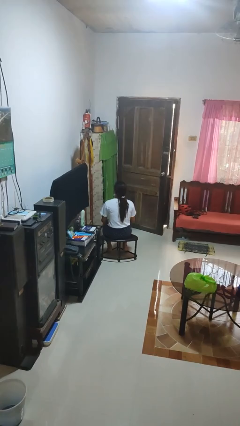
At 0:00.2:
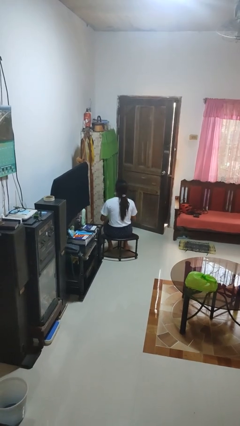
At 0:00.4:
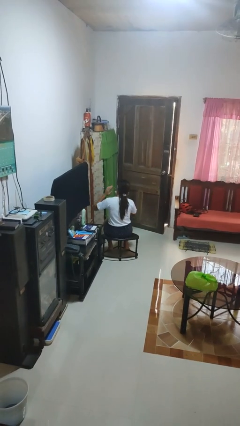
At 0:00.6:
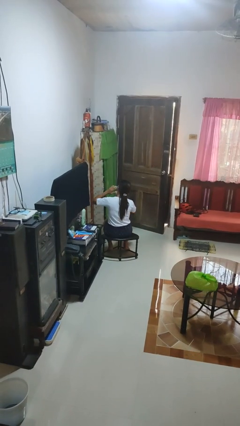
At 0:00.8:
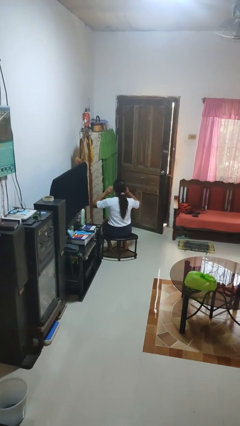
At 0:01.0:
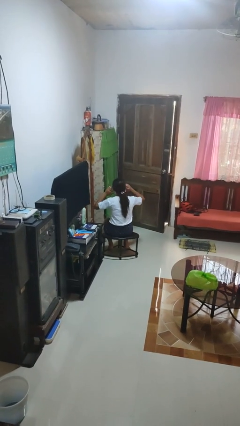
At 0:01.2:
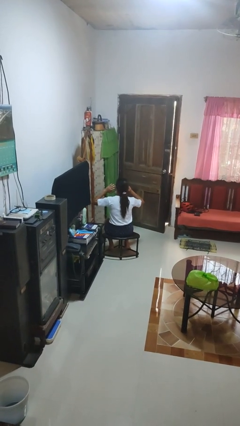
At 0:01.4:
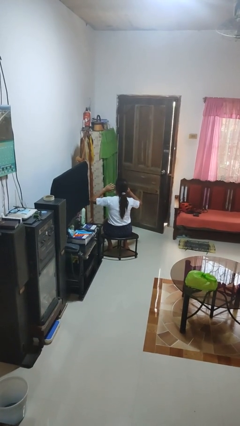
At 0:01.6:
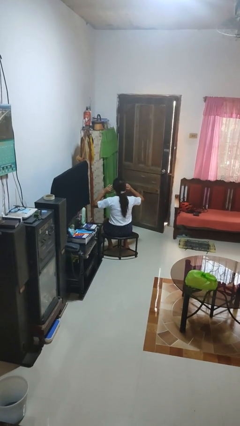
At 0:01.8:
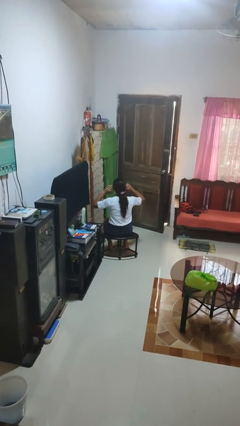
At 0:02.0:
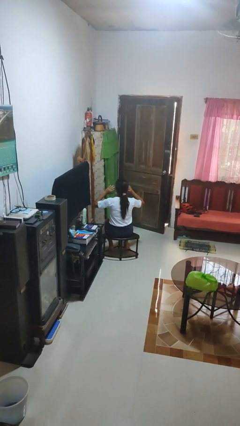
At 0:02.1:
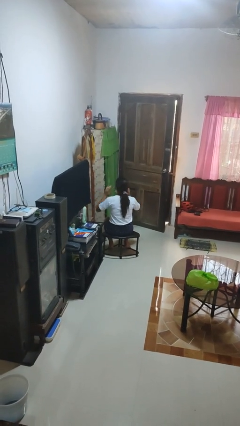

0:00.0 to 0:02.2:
person puts fingers in ear

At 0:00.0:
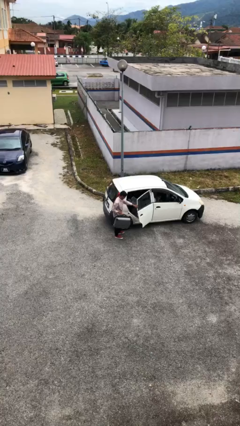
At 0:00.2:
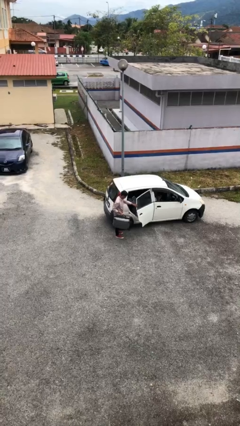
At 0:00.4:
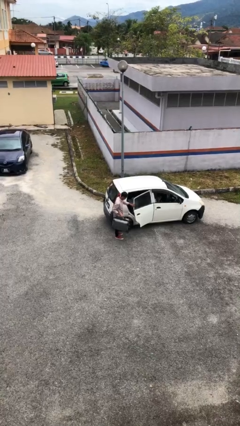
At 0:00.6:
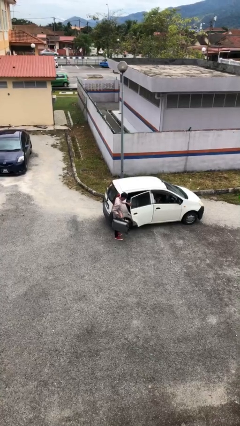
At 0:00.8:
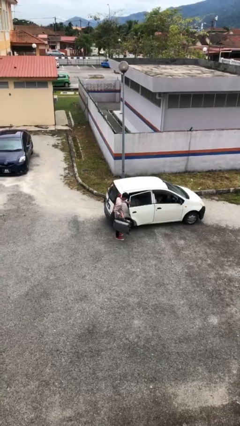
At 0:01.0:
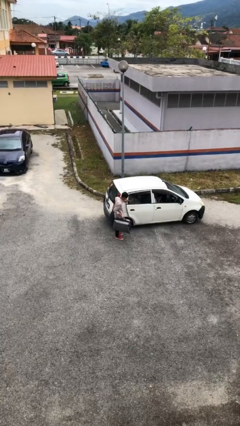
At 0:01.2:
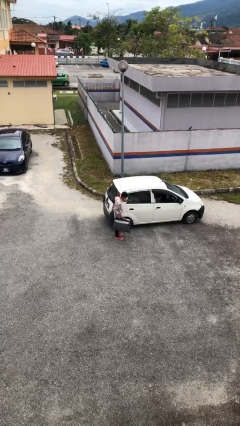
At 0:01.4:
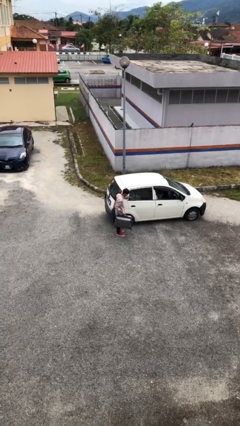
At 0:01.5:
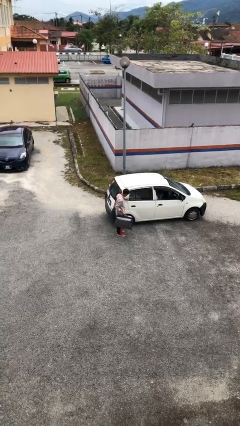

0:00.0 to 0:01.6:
person closes car door

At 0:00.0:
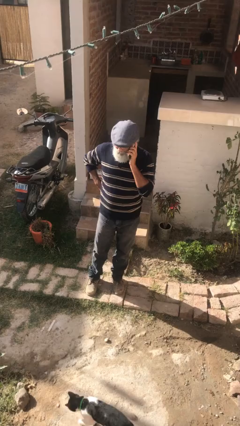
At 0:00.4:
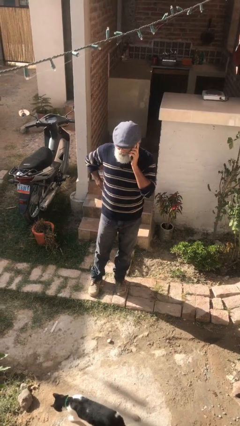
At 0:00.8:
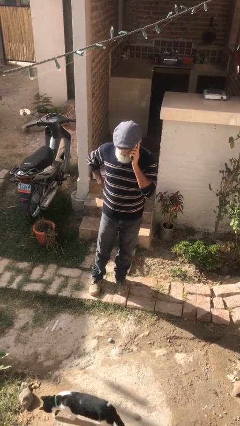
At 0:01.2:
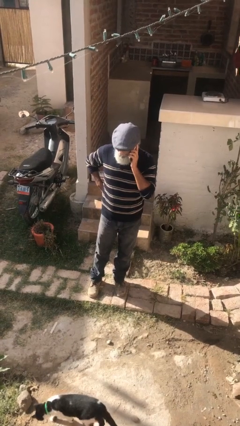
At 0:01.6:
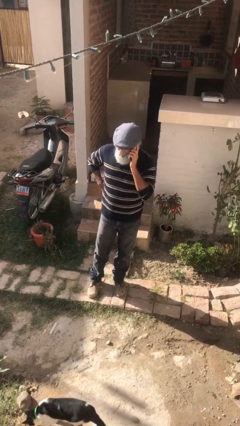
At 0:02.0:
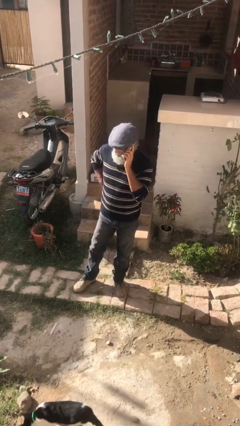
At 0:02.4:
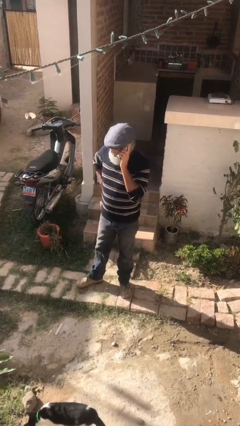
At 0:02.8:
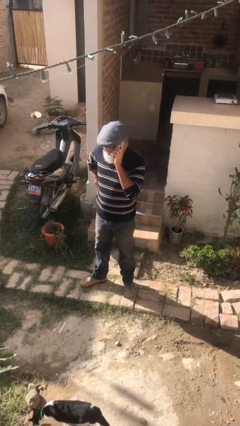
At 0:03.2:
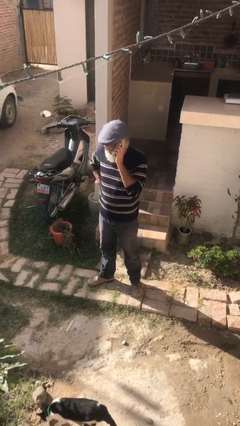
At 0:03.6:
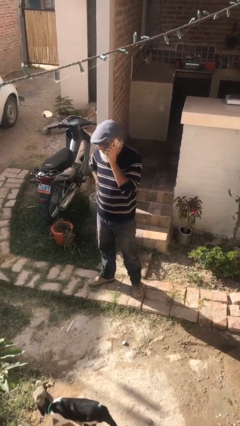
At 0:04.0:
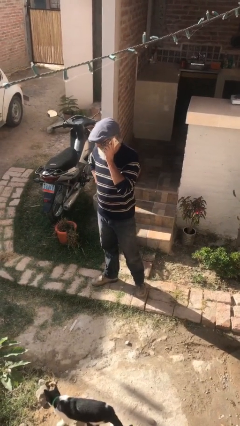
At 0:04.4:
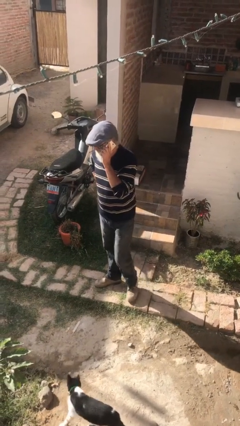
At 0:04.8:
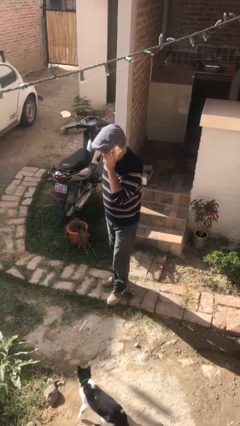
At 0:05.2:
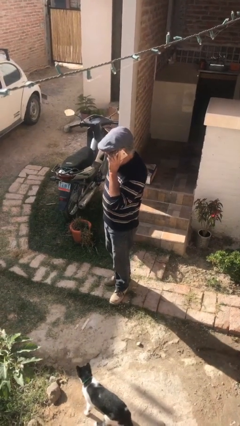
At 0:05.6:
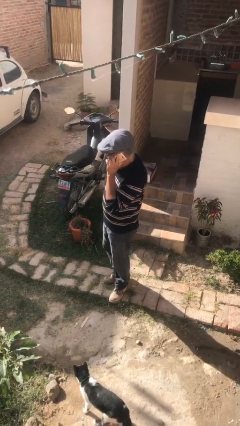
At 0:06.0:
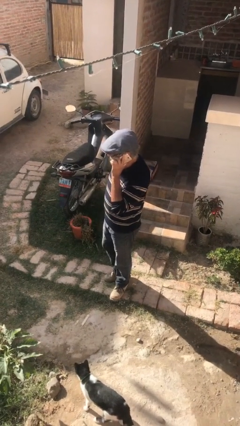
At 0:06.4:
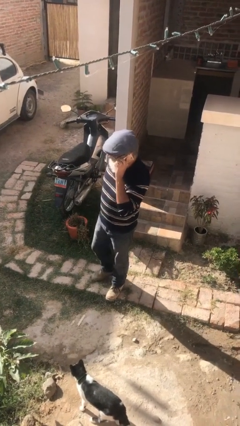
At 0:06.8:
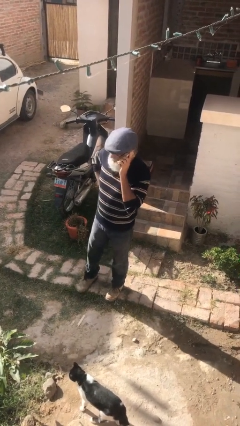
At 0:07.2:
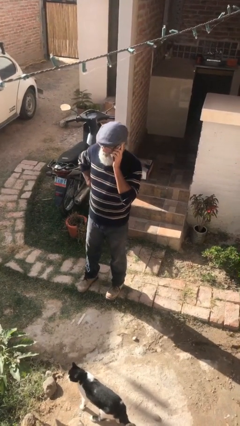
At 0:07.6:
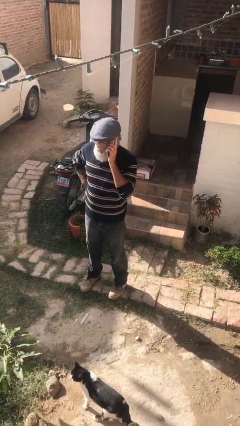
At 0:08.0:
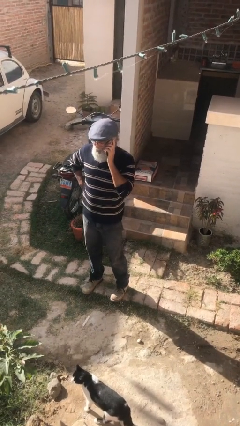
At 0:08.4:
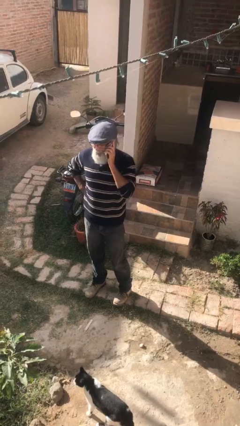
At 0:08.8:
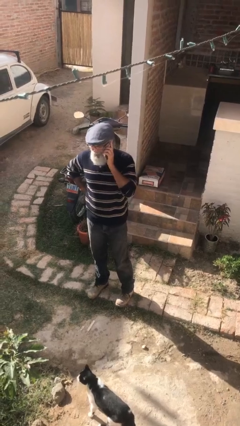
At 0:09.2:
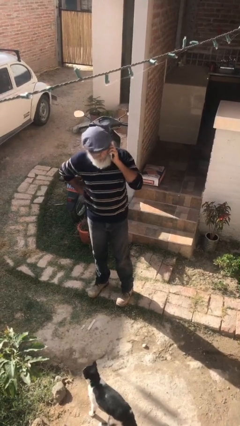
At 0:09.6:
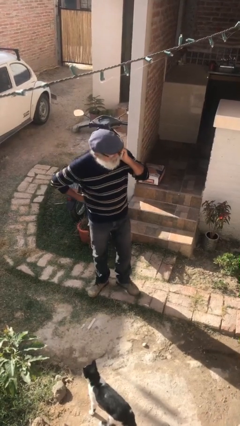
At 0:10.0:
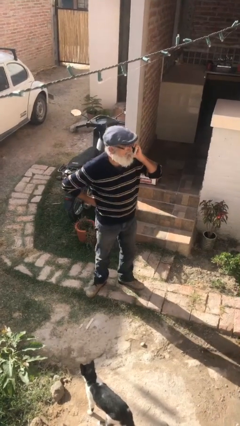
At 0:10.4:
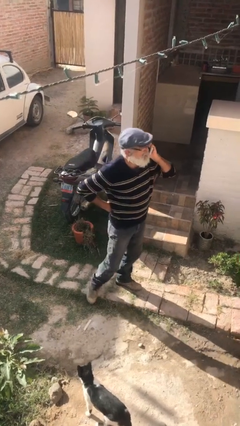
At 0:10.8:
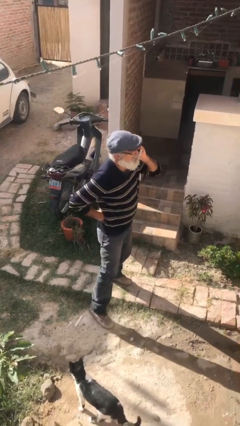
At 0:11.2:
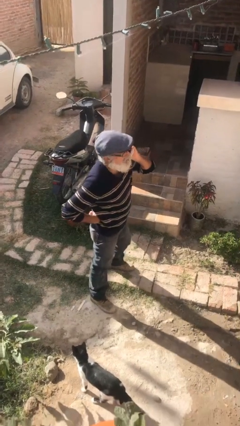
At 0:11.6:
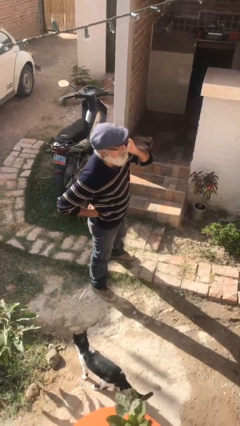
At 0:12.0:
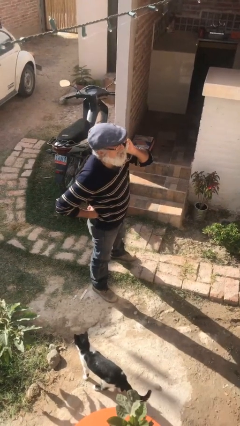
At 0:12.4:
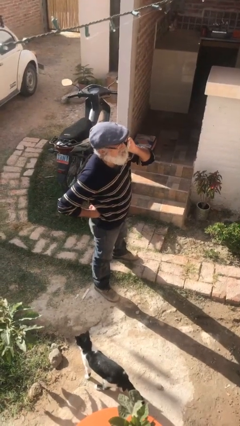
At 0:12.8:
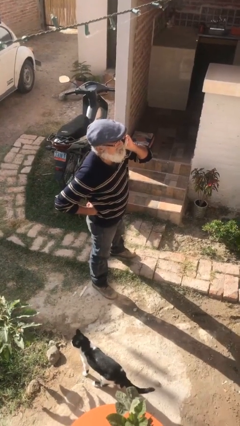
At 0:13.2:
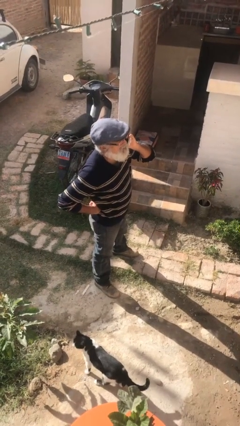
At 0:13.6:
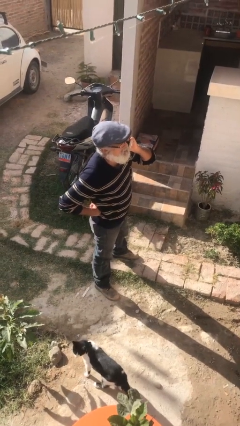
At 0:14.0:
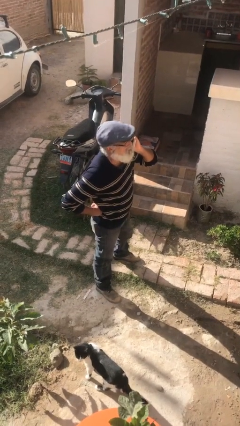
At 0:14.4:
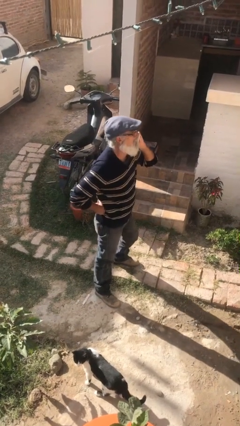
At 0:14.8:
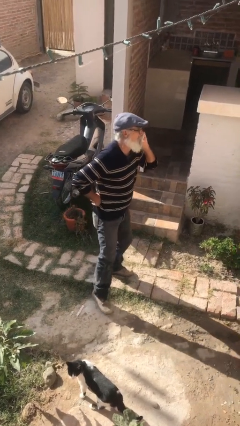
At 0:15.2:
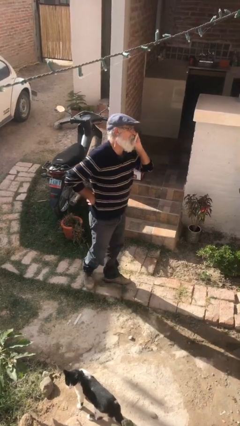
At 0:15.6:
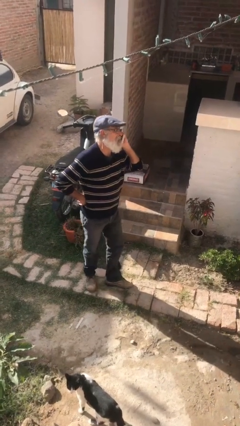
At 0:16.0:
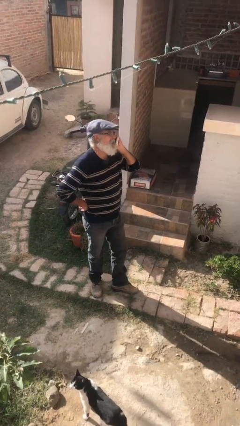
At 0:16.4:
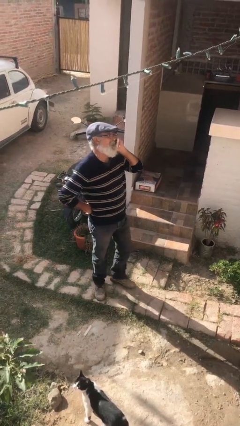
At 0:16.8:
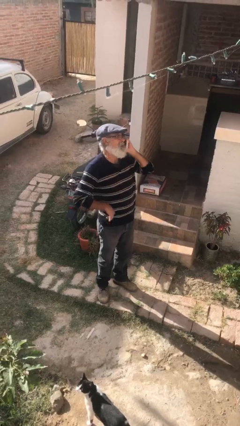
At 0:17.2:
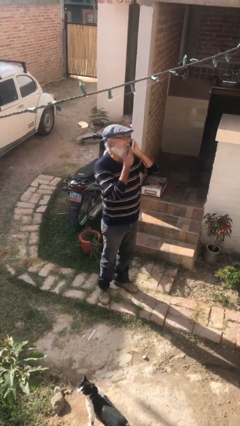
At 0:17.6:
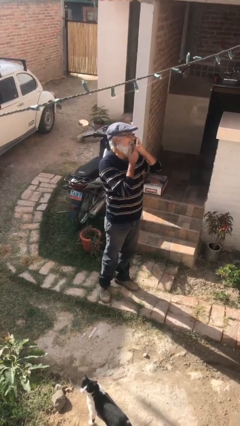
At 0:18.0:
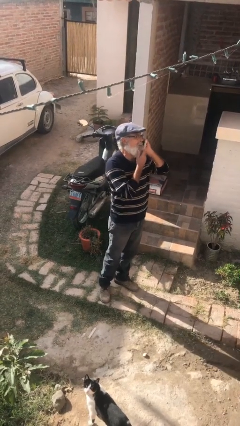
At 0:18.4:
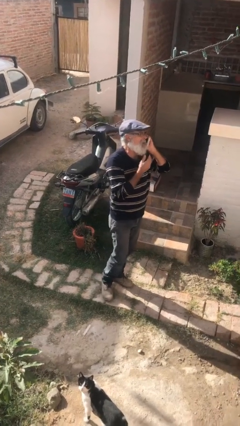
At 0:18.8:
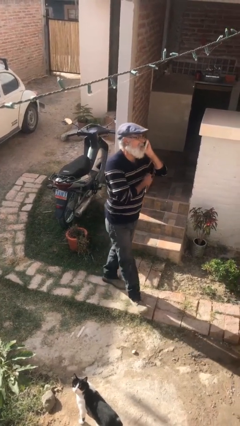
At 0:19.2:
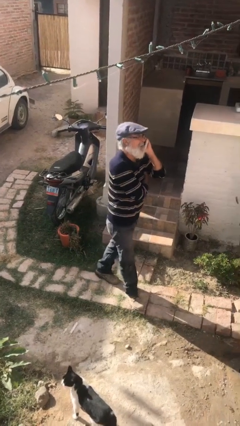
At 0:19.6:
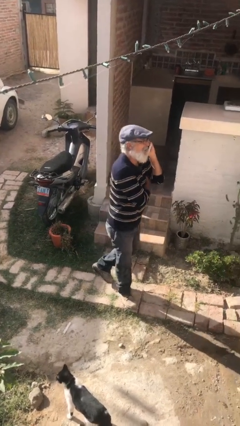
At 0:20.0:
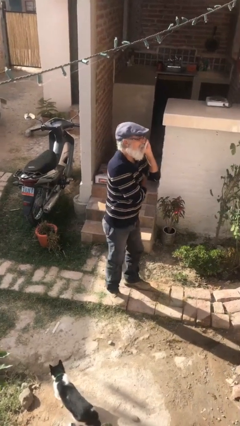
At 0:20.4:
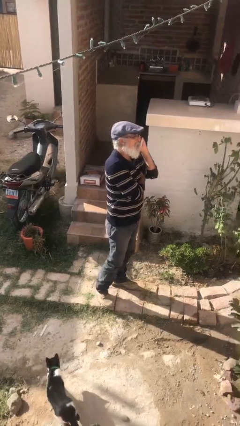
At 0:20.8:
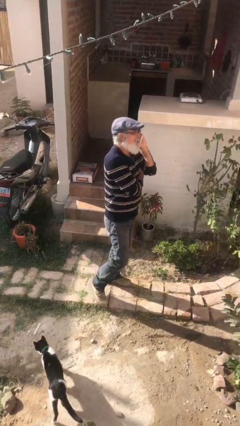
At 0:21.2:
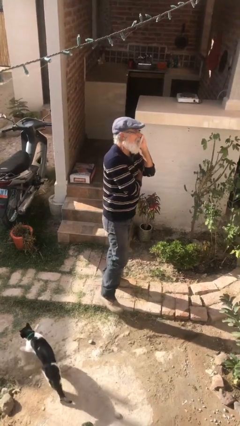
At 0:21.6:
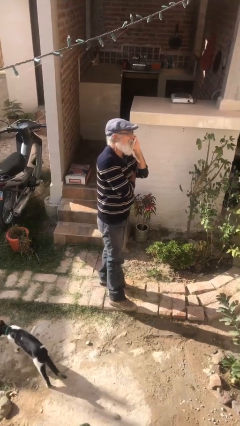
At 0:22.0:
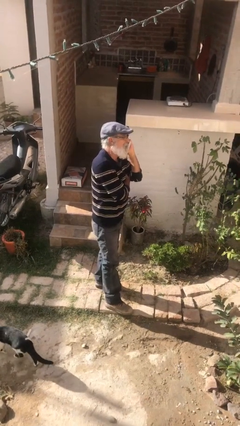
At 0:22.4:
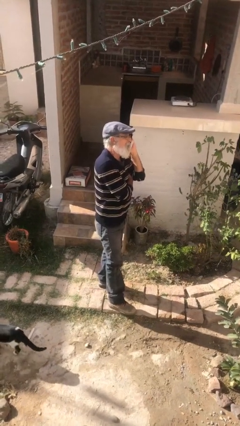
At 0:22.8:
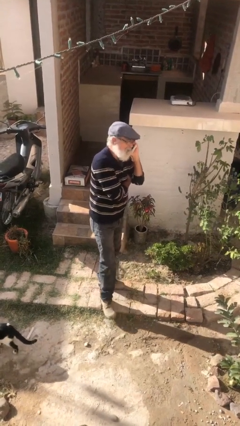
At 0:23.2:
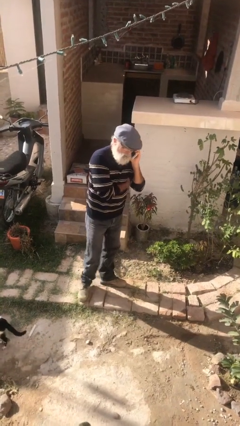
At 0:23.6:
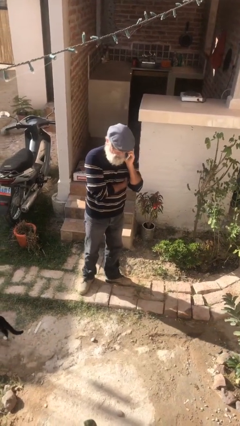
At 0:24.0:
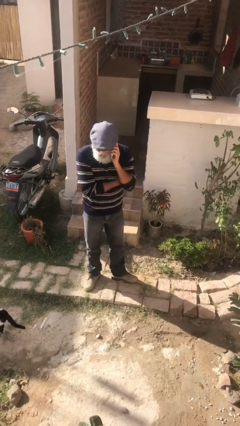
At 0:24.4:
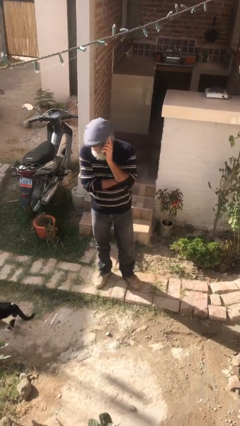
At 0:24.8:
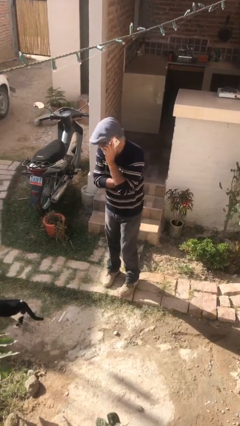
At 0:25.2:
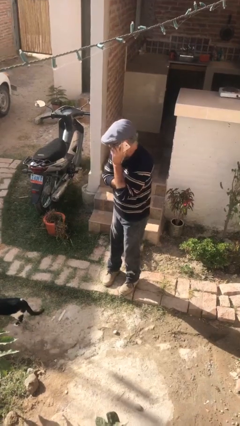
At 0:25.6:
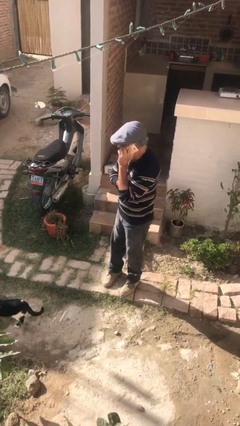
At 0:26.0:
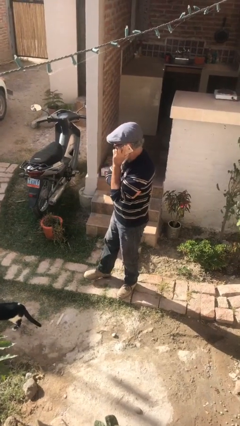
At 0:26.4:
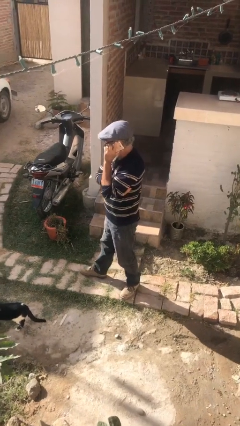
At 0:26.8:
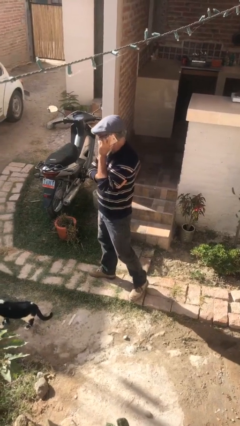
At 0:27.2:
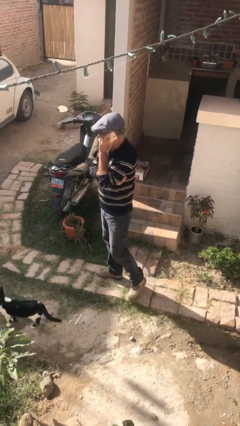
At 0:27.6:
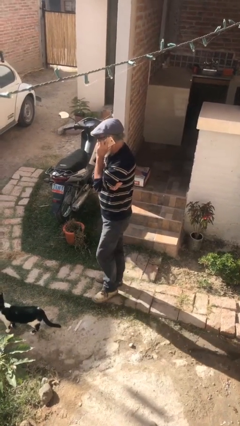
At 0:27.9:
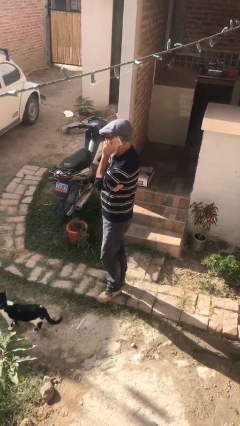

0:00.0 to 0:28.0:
person walks
